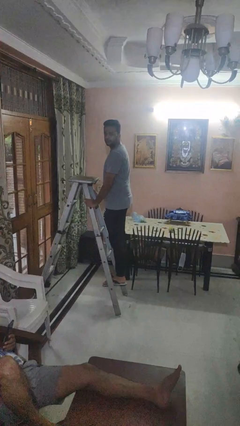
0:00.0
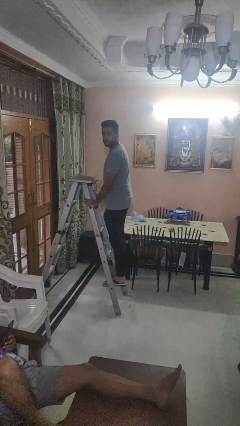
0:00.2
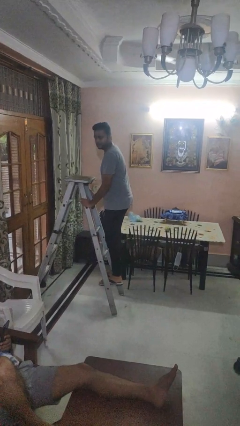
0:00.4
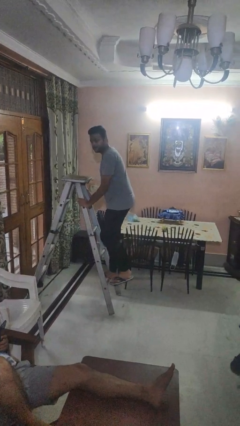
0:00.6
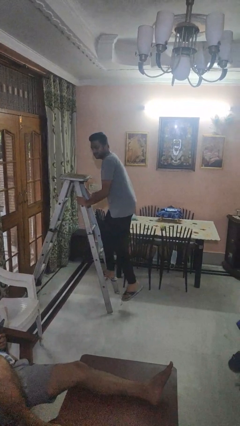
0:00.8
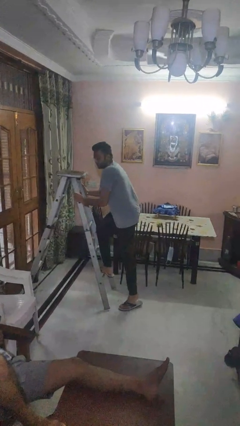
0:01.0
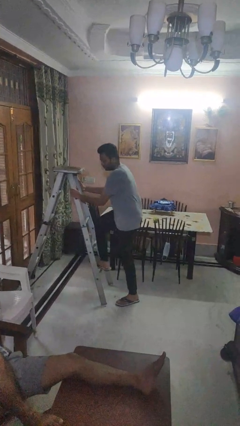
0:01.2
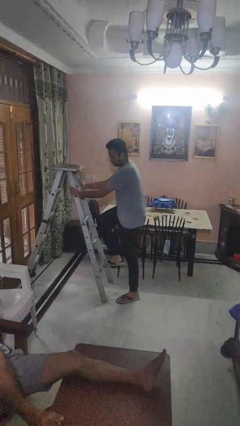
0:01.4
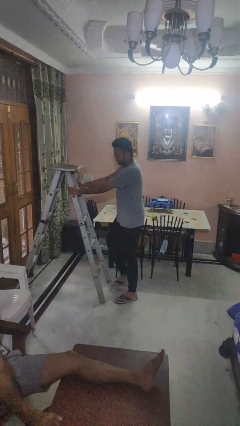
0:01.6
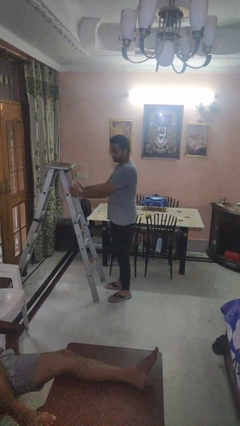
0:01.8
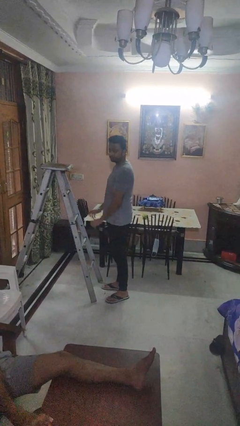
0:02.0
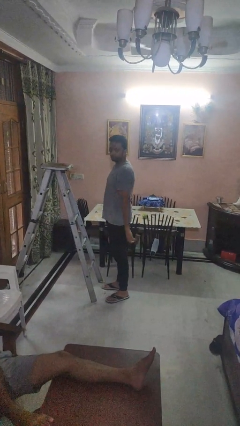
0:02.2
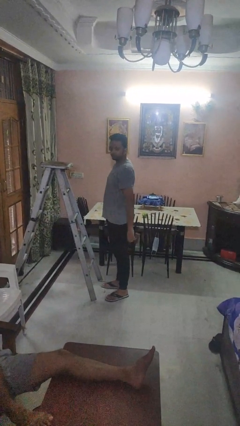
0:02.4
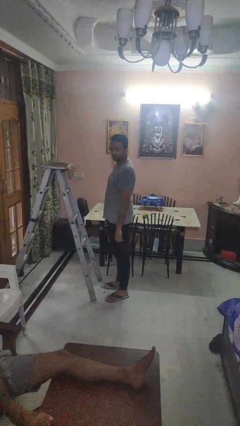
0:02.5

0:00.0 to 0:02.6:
person climbs down ladder

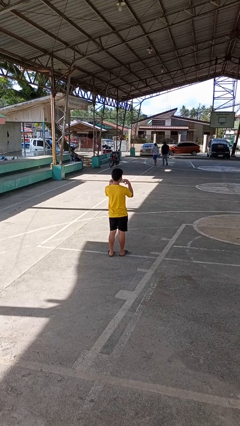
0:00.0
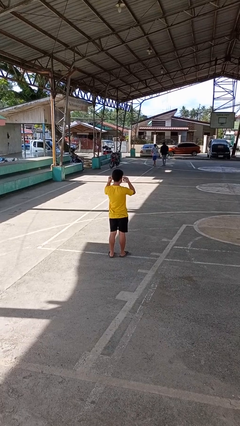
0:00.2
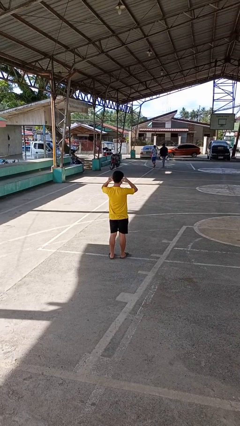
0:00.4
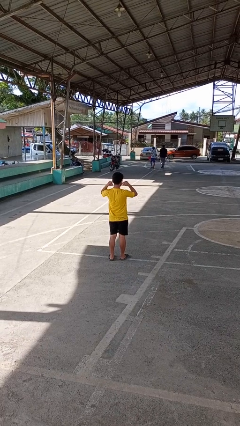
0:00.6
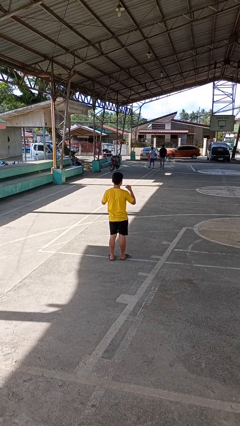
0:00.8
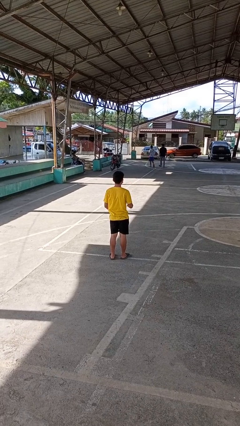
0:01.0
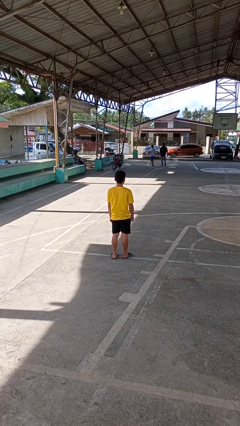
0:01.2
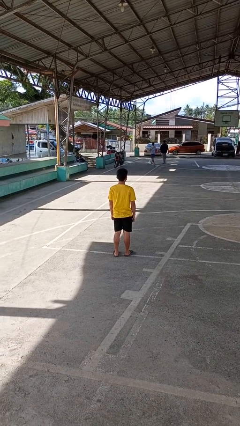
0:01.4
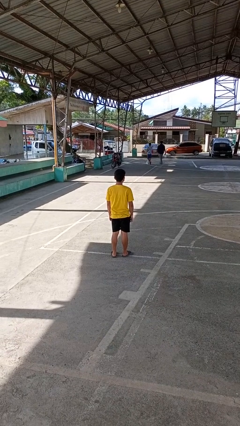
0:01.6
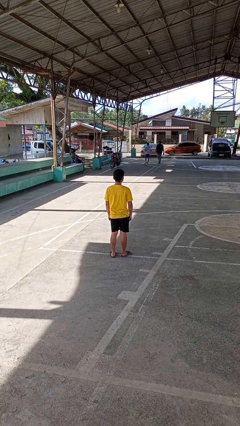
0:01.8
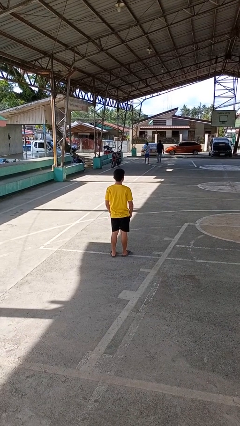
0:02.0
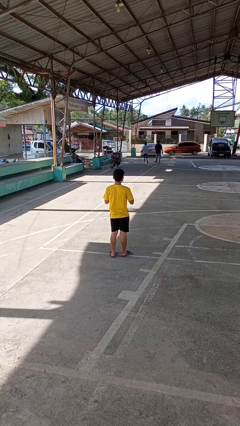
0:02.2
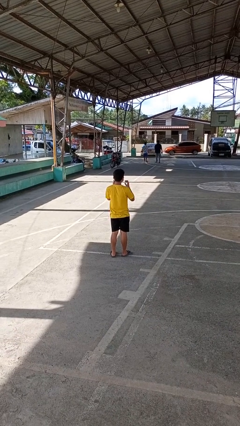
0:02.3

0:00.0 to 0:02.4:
person puts on facemask

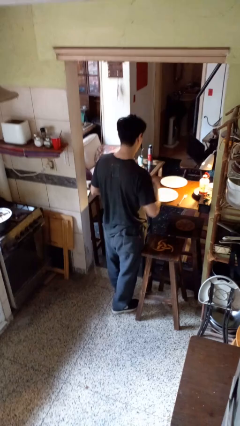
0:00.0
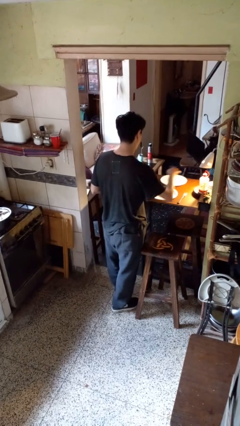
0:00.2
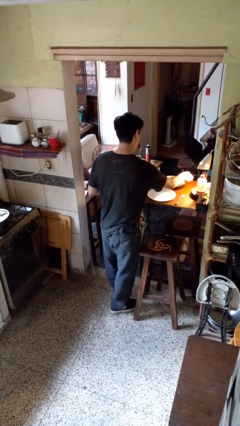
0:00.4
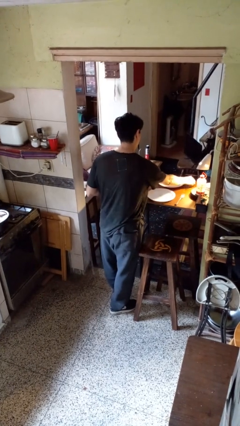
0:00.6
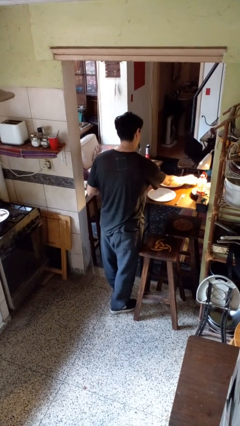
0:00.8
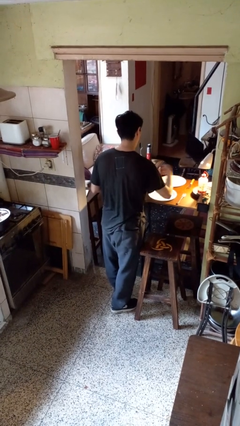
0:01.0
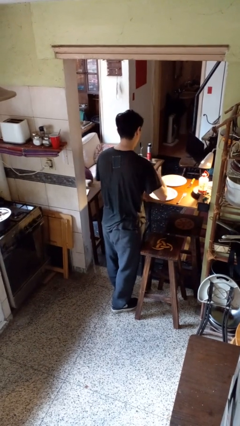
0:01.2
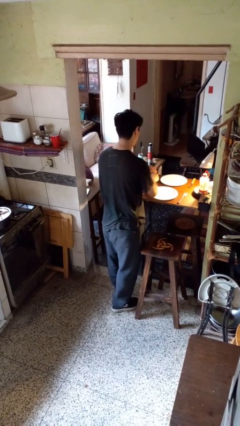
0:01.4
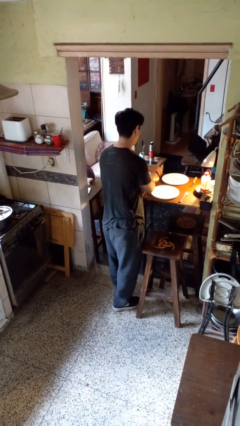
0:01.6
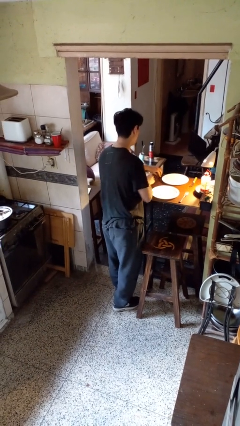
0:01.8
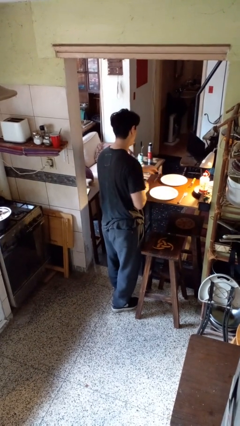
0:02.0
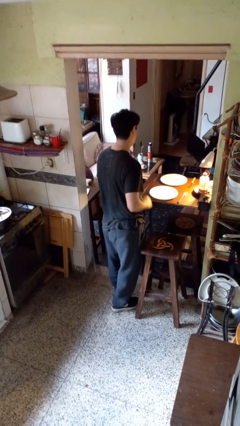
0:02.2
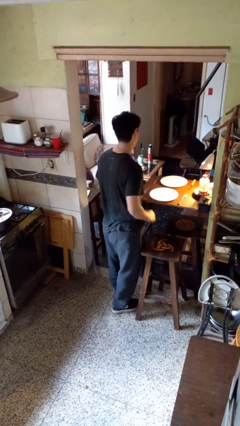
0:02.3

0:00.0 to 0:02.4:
person sets table

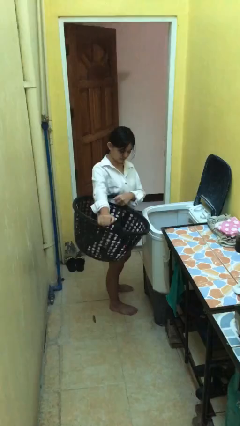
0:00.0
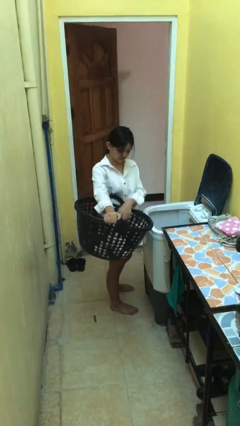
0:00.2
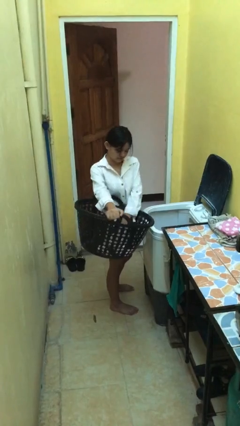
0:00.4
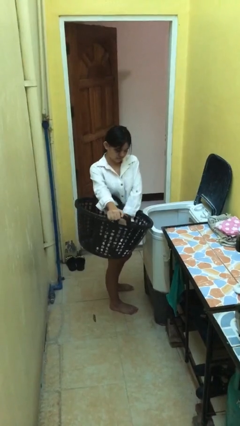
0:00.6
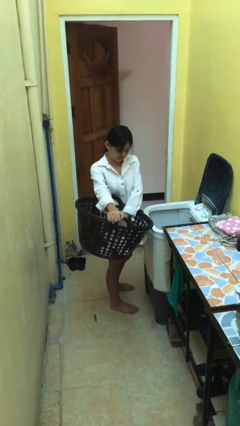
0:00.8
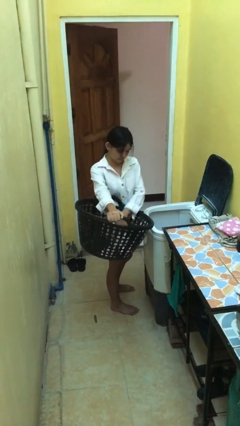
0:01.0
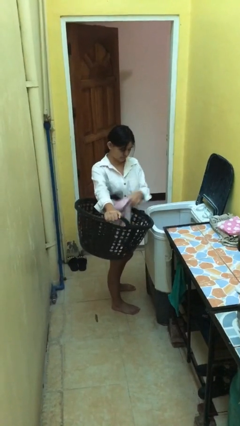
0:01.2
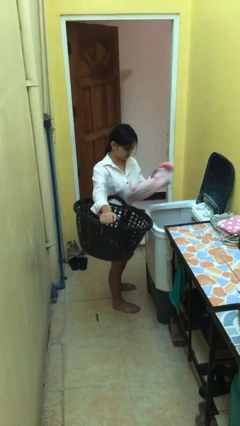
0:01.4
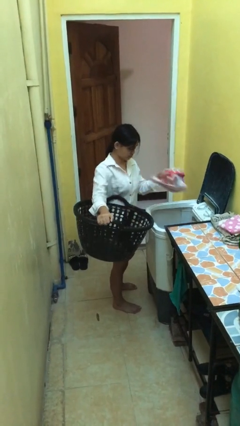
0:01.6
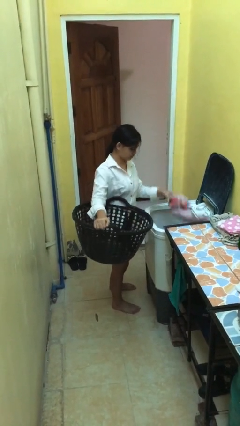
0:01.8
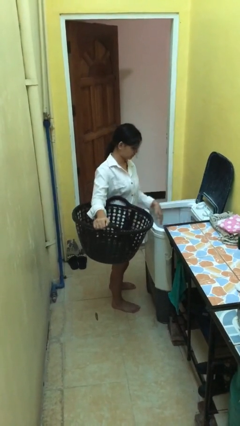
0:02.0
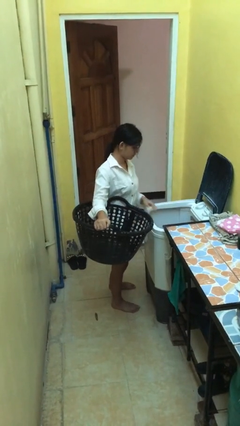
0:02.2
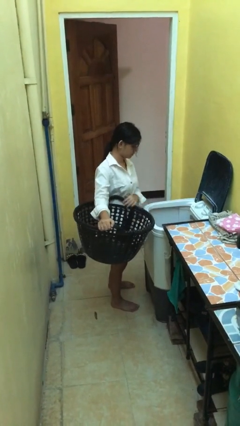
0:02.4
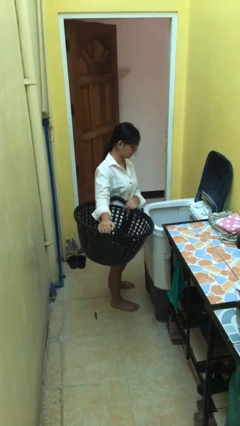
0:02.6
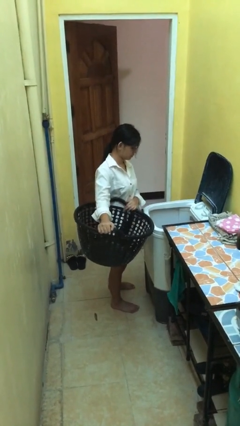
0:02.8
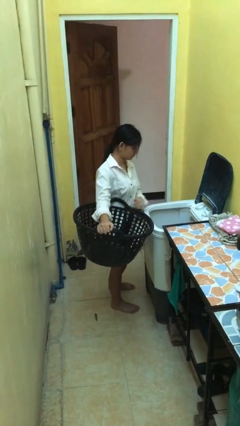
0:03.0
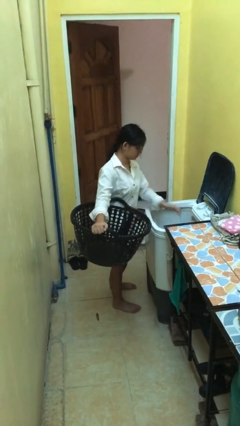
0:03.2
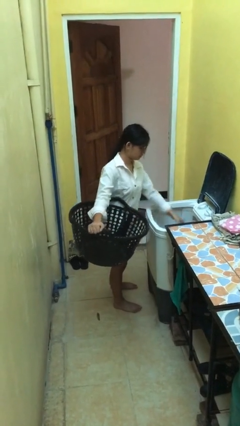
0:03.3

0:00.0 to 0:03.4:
person loads clotheswasher

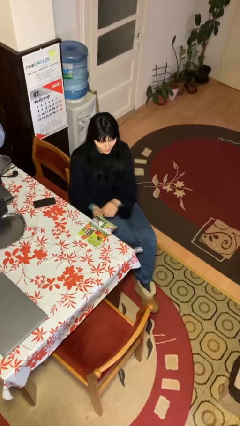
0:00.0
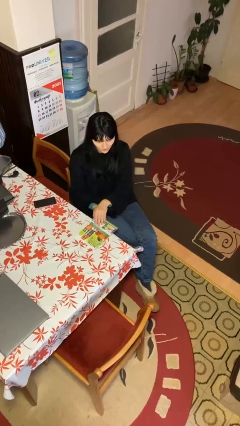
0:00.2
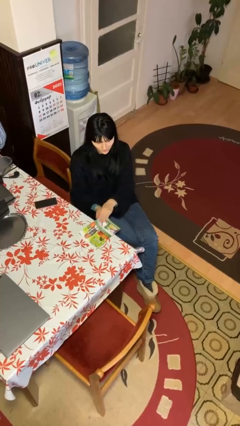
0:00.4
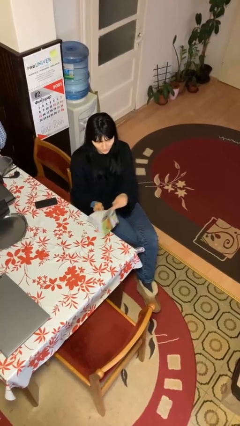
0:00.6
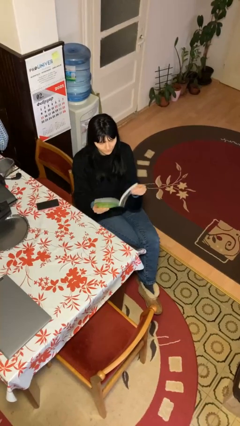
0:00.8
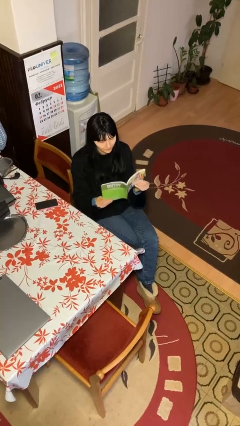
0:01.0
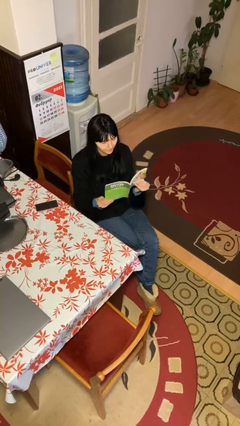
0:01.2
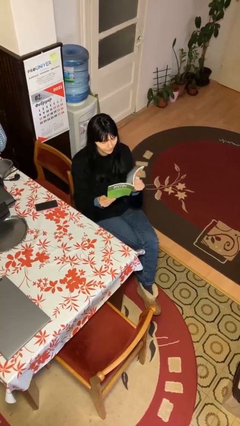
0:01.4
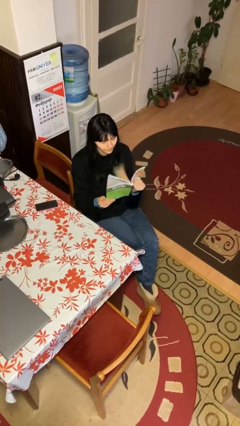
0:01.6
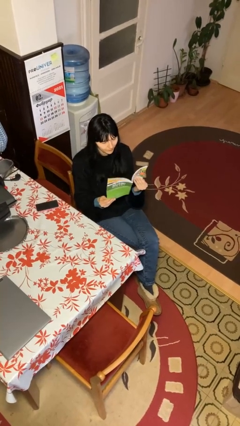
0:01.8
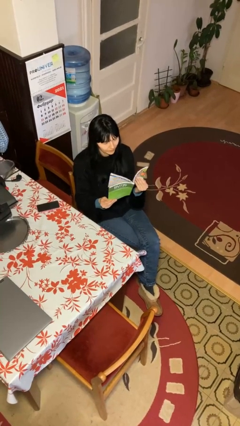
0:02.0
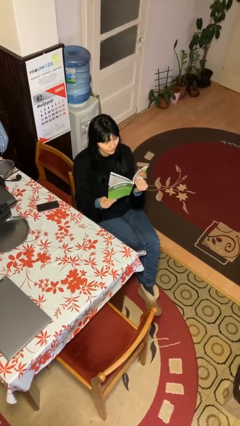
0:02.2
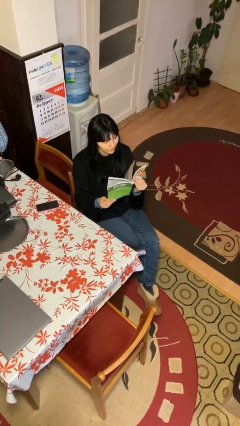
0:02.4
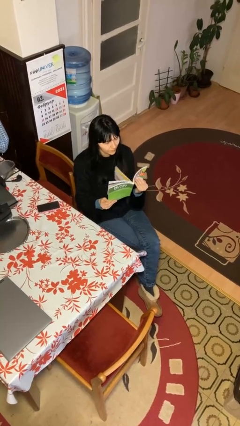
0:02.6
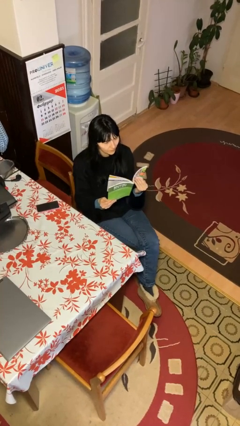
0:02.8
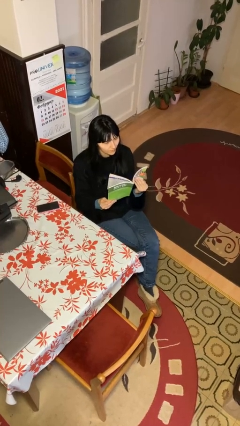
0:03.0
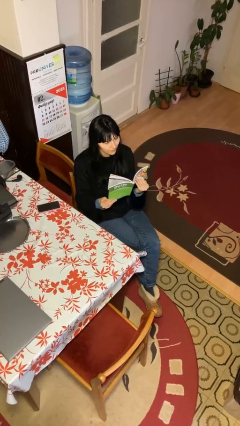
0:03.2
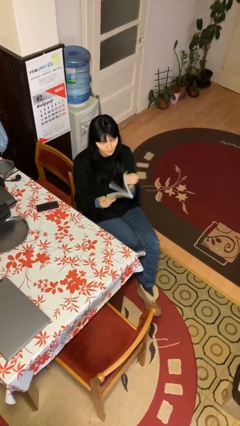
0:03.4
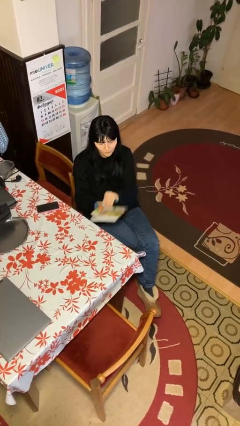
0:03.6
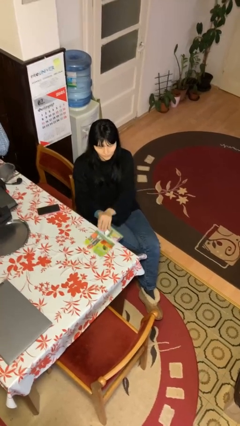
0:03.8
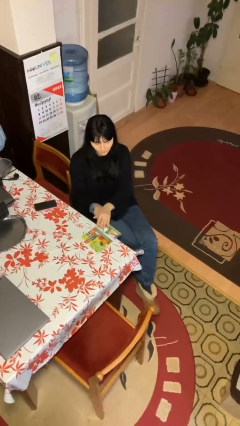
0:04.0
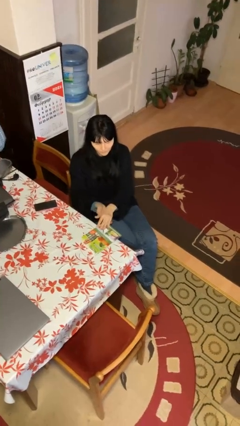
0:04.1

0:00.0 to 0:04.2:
person reads document

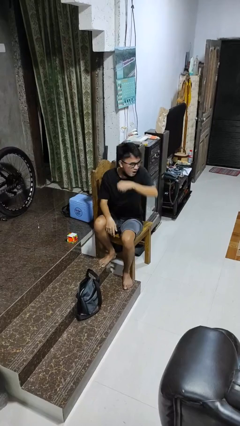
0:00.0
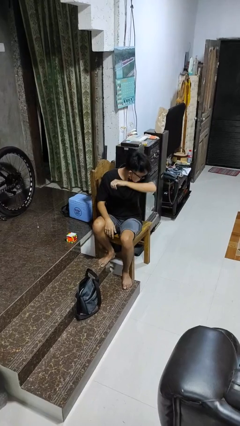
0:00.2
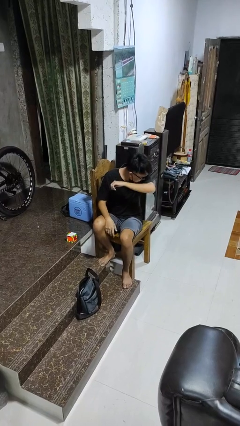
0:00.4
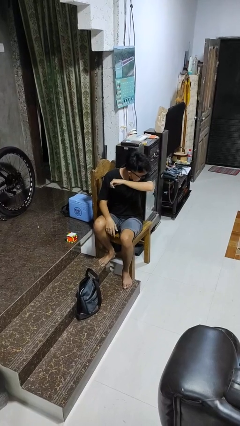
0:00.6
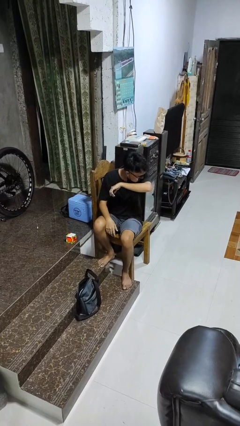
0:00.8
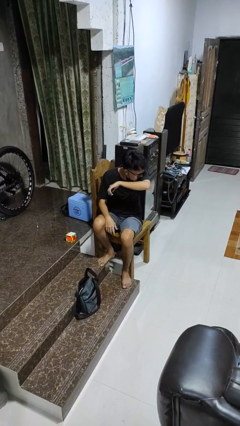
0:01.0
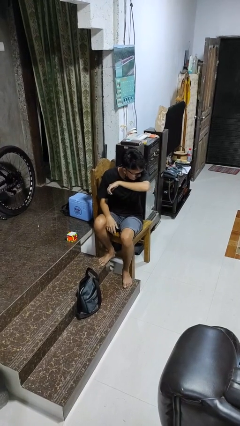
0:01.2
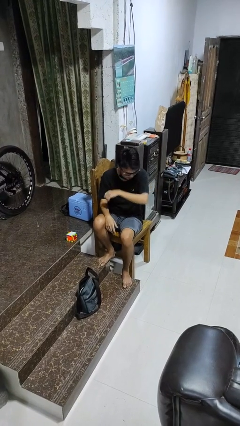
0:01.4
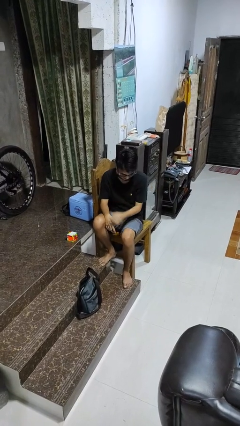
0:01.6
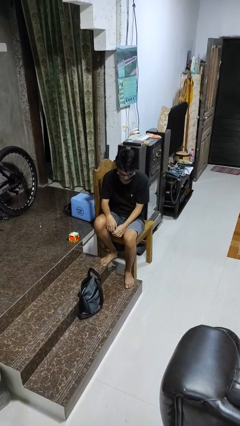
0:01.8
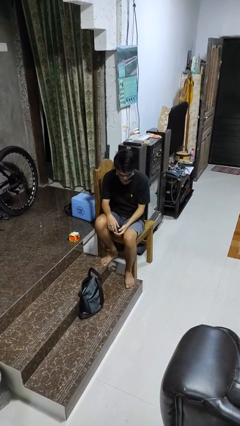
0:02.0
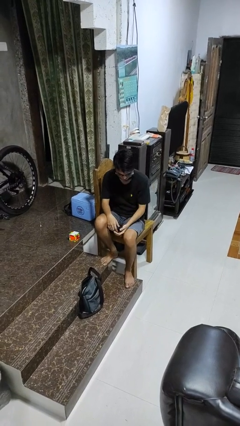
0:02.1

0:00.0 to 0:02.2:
person sneezes into arm
